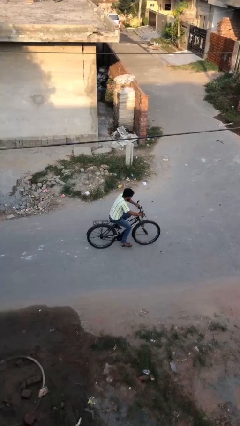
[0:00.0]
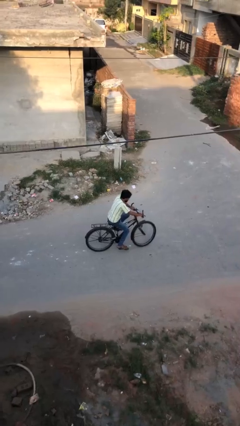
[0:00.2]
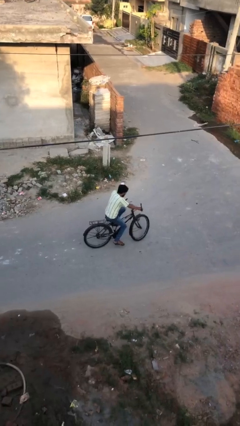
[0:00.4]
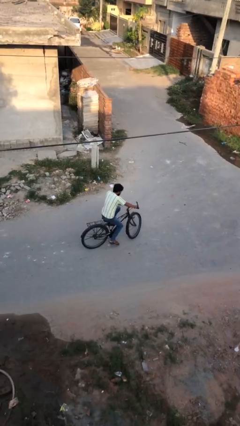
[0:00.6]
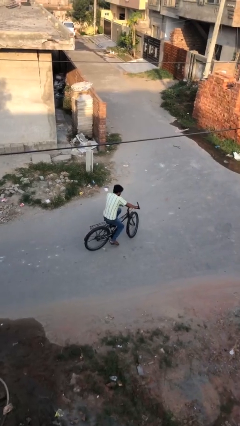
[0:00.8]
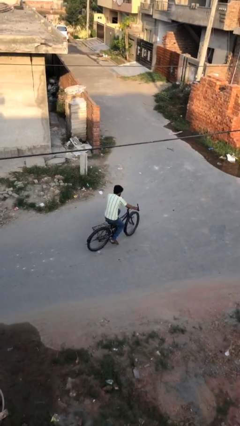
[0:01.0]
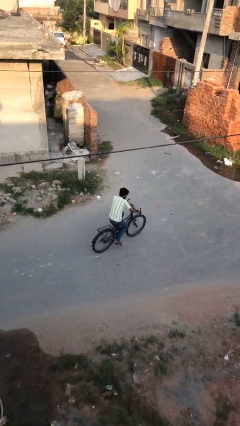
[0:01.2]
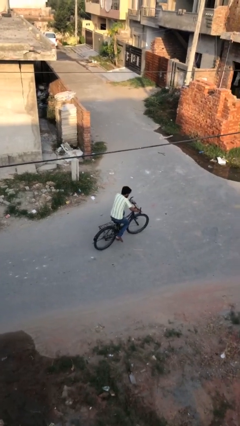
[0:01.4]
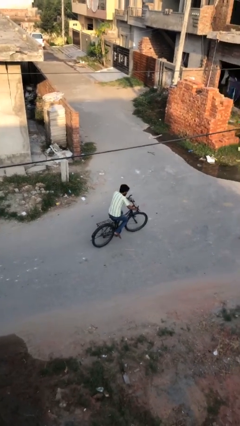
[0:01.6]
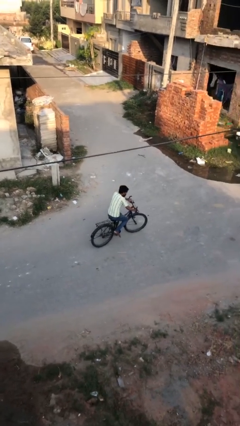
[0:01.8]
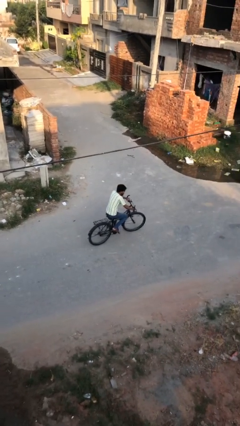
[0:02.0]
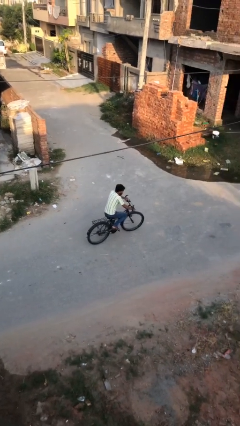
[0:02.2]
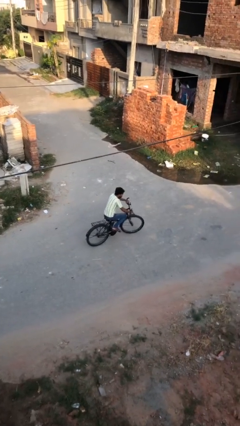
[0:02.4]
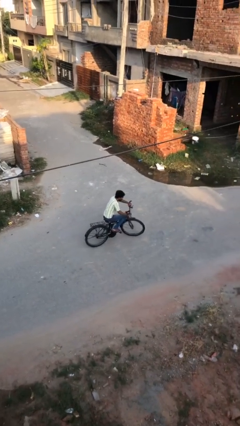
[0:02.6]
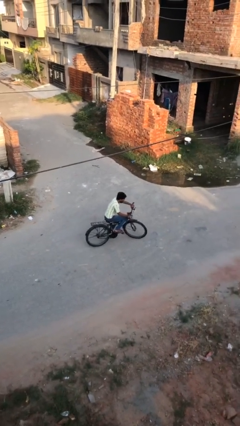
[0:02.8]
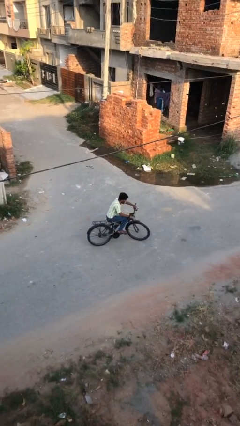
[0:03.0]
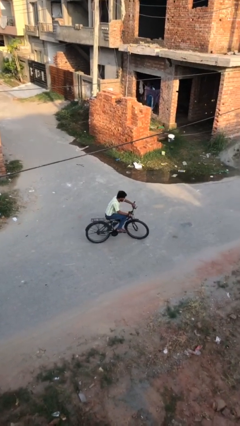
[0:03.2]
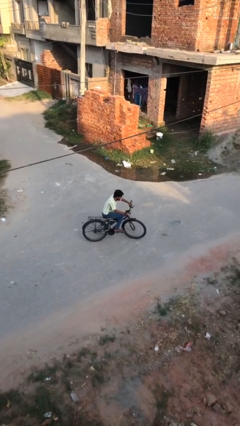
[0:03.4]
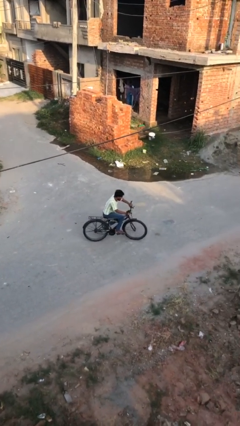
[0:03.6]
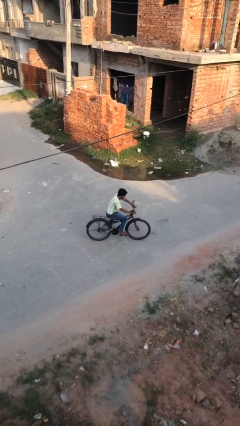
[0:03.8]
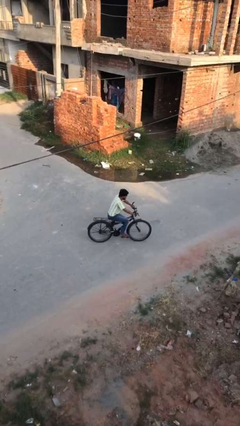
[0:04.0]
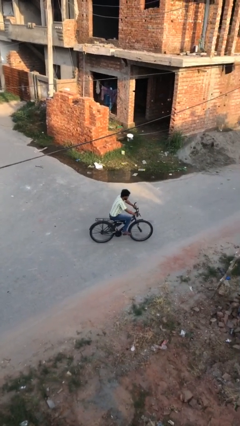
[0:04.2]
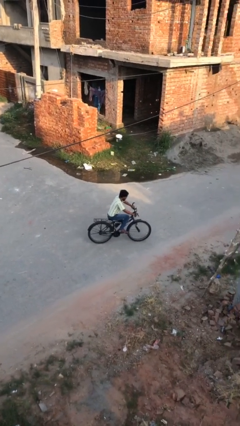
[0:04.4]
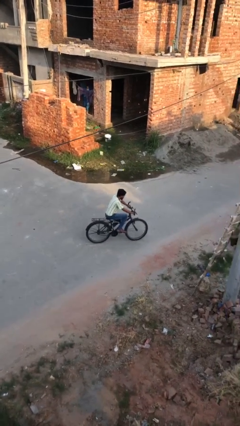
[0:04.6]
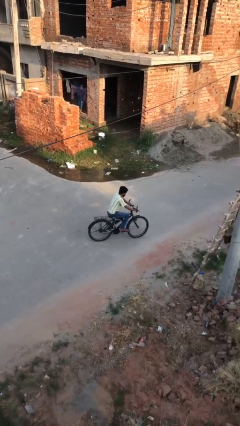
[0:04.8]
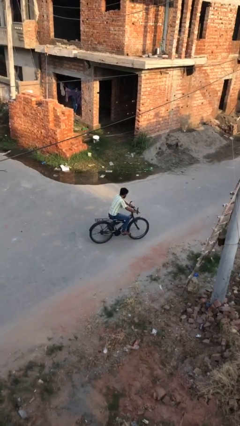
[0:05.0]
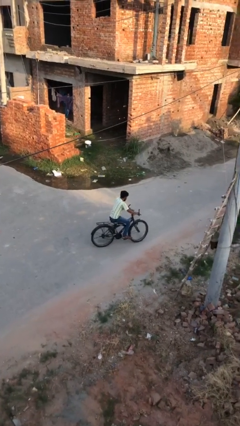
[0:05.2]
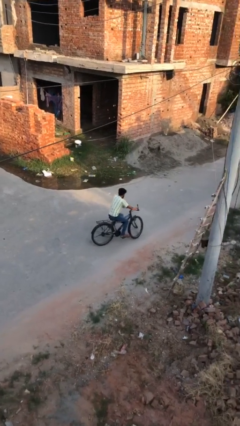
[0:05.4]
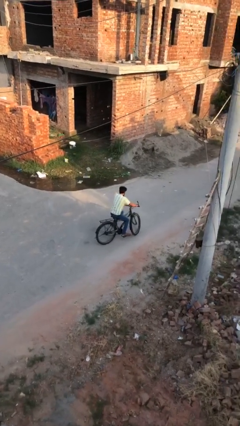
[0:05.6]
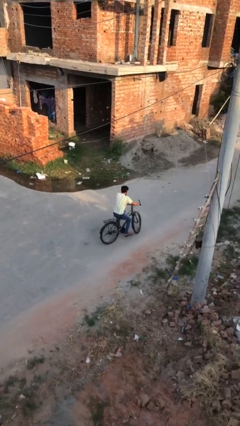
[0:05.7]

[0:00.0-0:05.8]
person rides bicycle

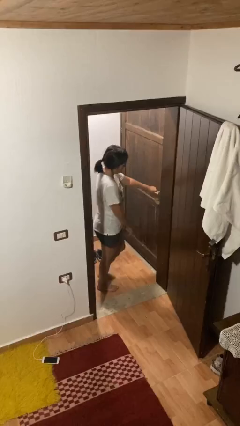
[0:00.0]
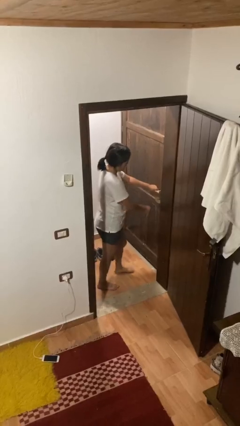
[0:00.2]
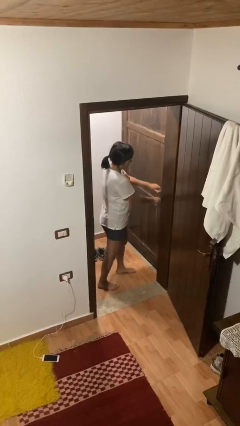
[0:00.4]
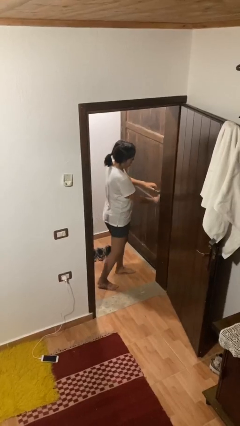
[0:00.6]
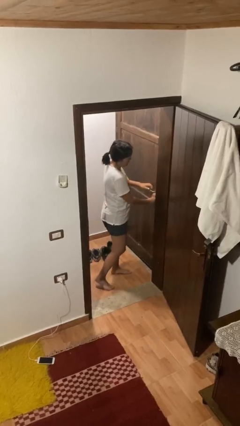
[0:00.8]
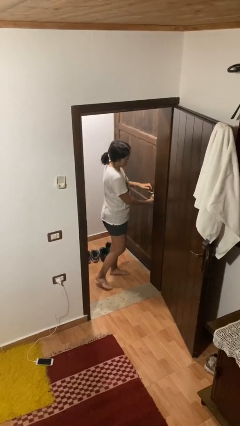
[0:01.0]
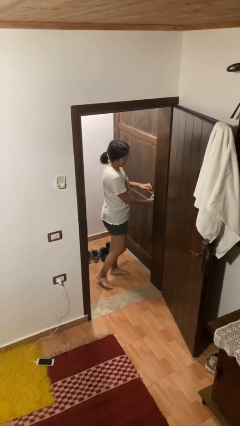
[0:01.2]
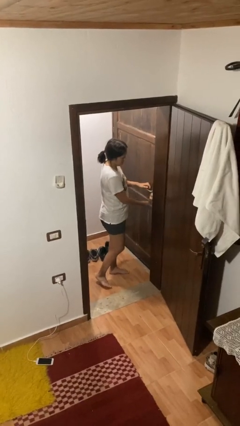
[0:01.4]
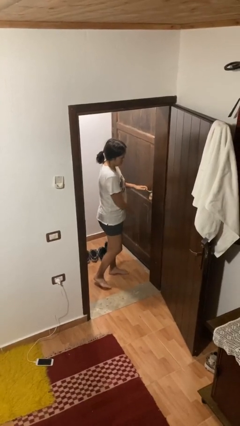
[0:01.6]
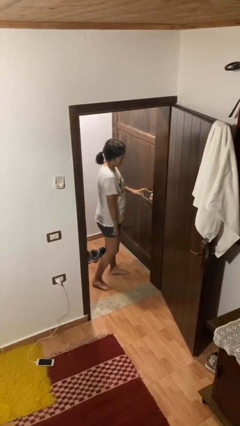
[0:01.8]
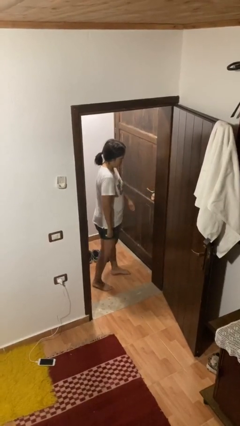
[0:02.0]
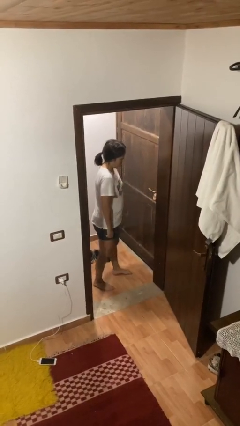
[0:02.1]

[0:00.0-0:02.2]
person locks door with keys

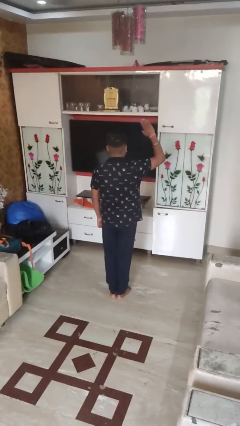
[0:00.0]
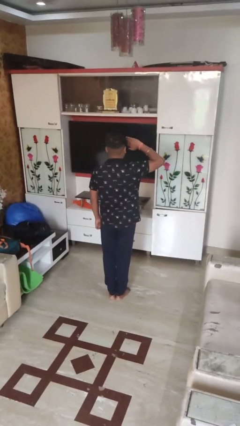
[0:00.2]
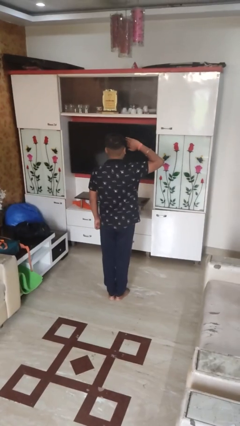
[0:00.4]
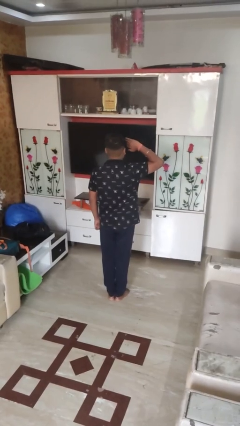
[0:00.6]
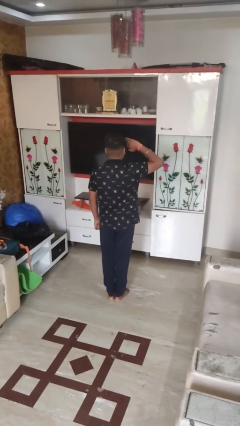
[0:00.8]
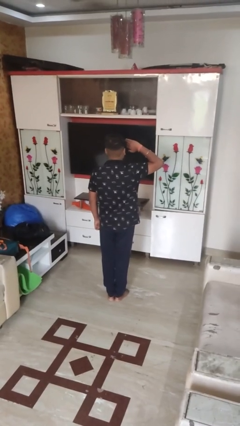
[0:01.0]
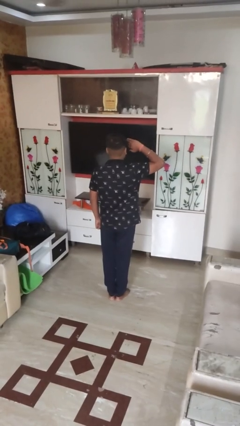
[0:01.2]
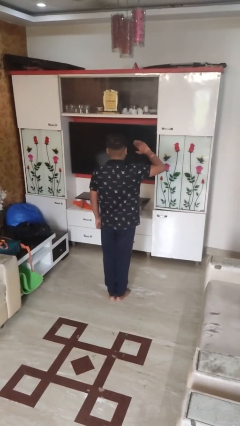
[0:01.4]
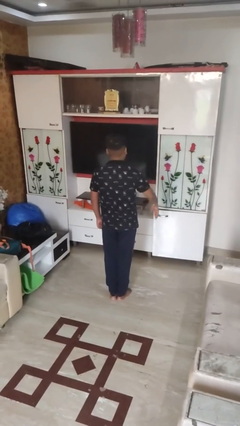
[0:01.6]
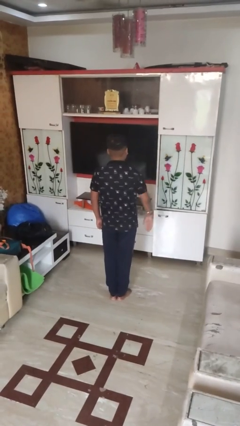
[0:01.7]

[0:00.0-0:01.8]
person salutes

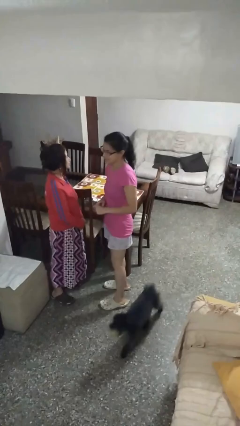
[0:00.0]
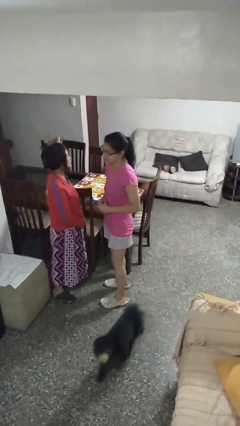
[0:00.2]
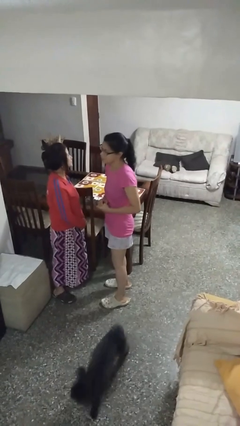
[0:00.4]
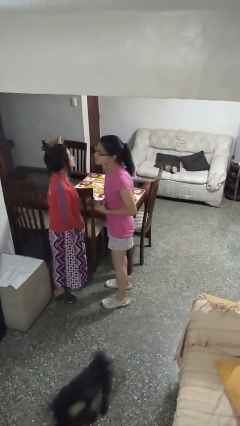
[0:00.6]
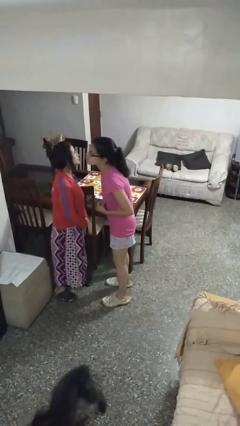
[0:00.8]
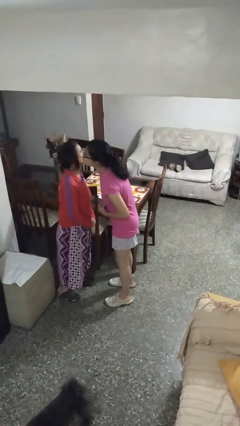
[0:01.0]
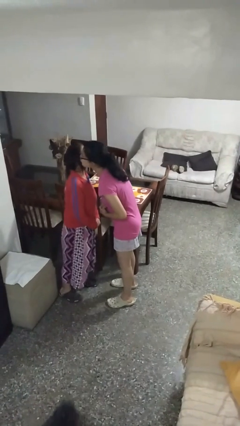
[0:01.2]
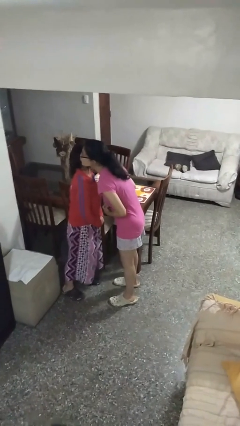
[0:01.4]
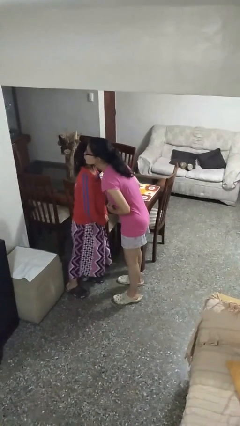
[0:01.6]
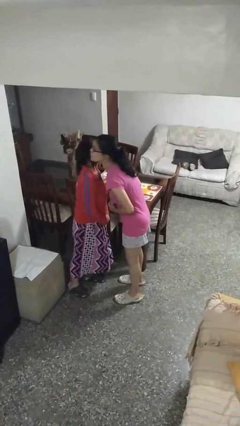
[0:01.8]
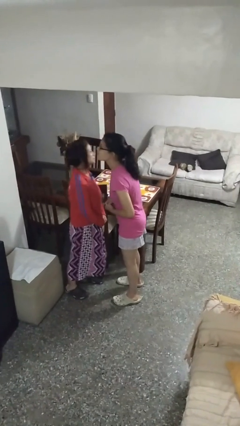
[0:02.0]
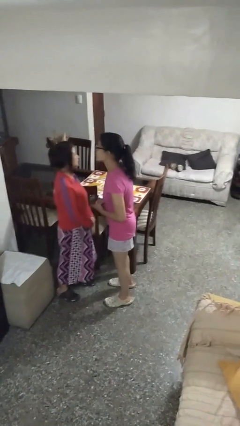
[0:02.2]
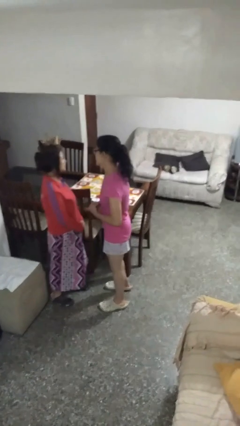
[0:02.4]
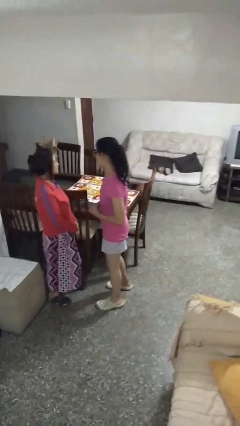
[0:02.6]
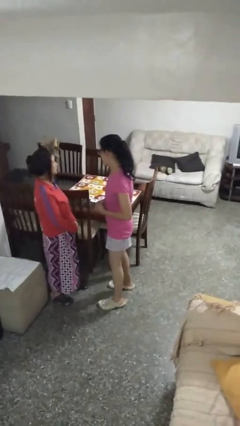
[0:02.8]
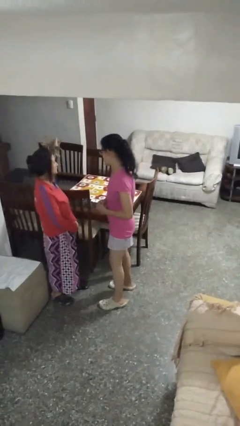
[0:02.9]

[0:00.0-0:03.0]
person kisses cheek of person

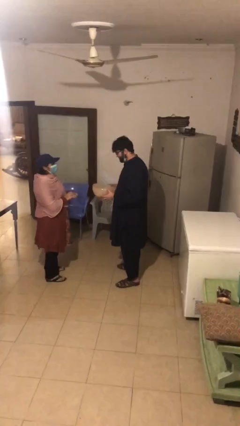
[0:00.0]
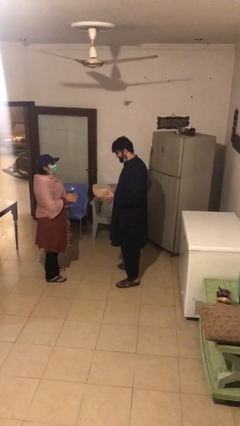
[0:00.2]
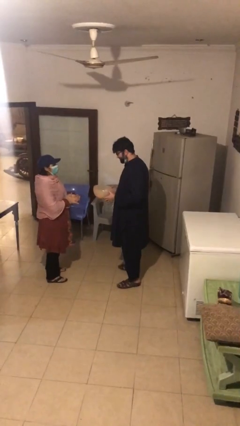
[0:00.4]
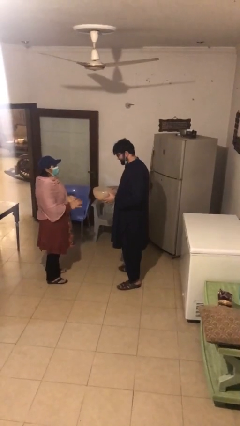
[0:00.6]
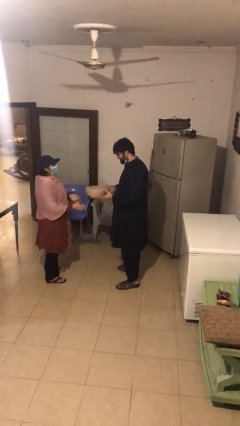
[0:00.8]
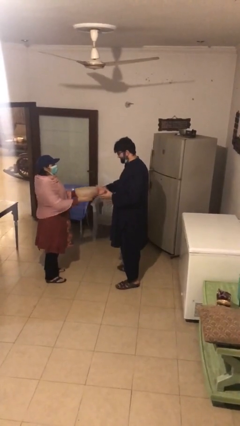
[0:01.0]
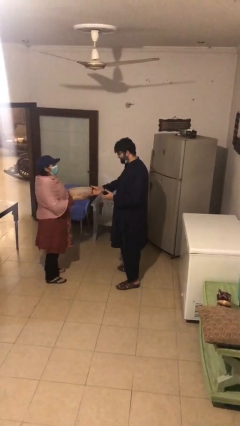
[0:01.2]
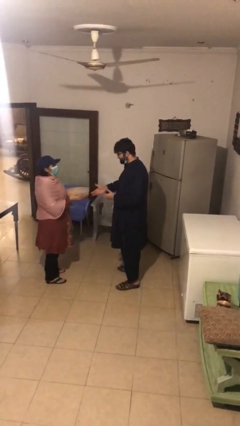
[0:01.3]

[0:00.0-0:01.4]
person transfers object to person

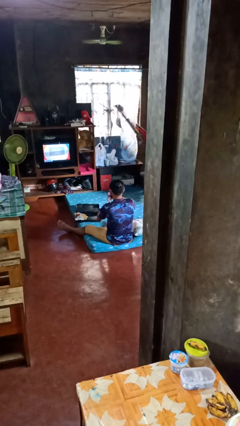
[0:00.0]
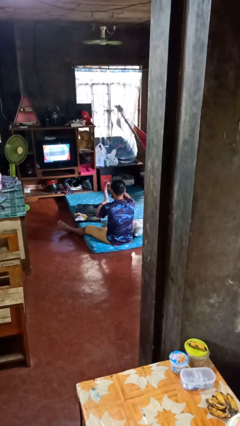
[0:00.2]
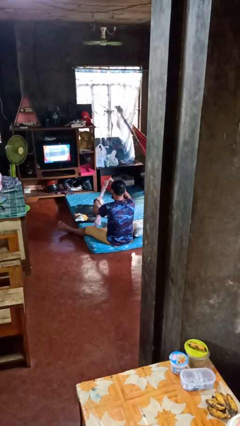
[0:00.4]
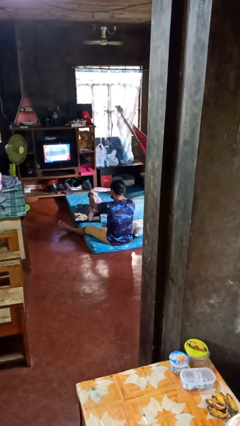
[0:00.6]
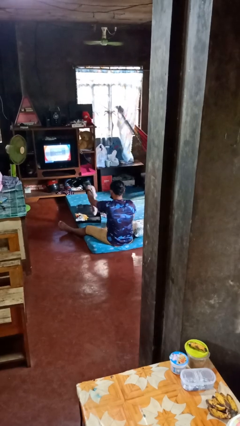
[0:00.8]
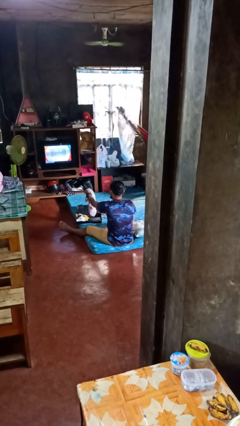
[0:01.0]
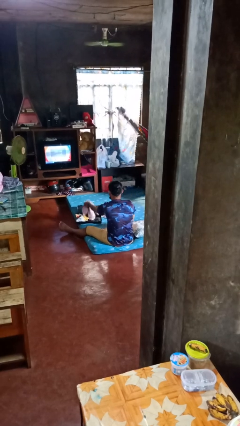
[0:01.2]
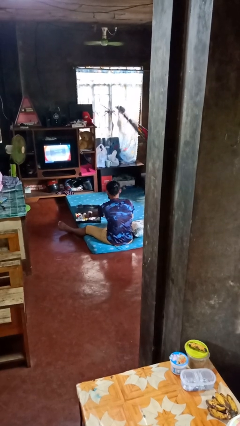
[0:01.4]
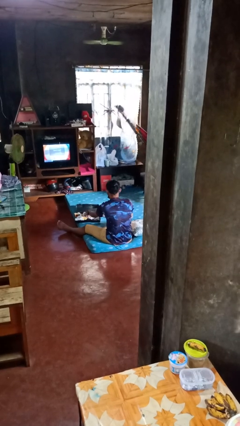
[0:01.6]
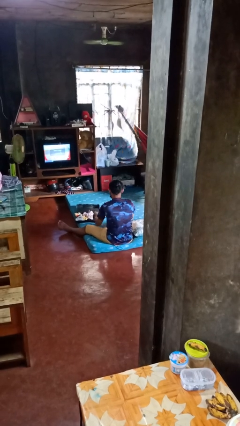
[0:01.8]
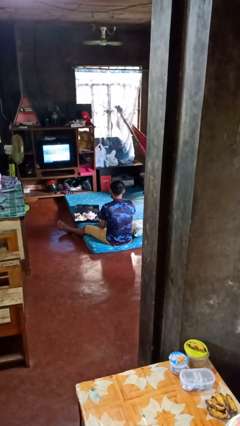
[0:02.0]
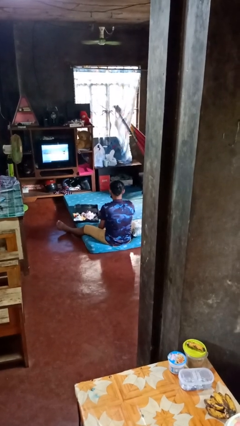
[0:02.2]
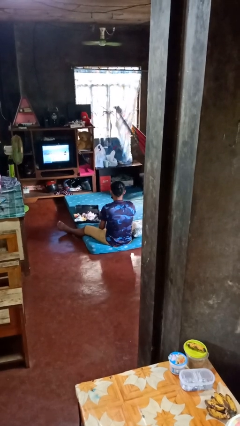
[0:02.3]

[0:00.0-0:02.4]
person loads clothes into suitcase

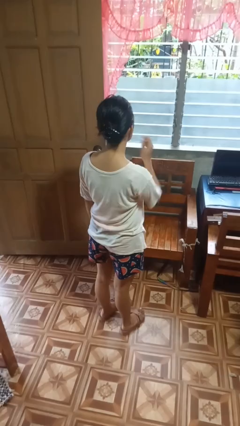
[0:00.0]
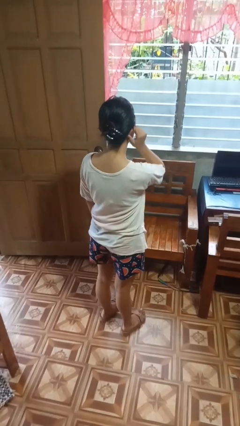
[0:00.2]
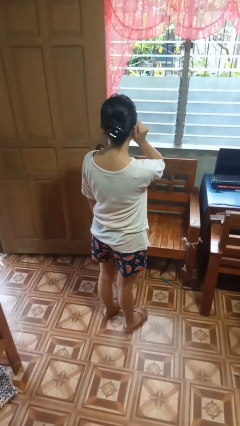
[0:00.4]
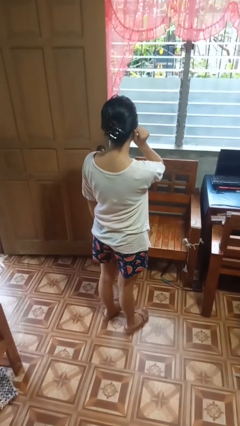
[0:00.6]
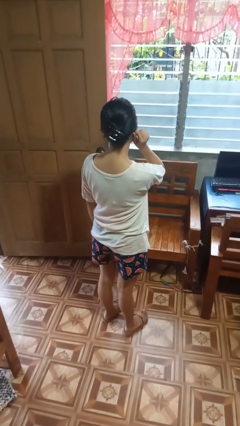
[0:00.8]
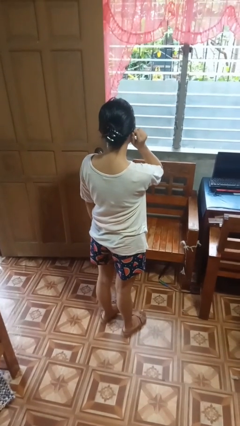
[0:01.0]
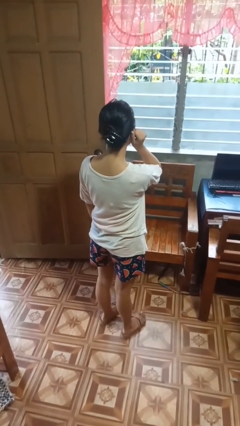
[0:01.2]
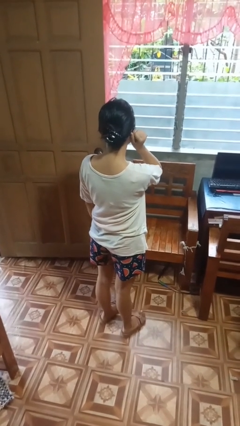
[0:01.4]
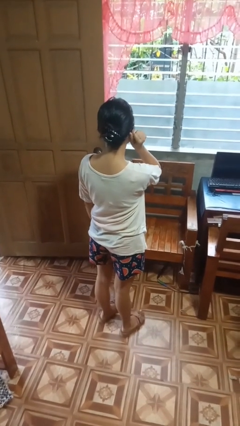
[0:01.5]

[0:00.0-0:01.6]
person touches earlobe
